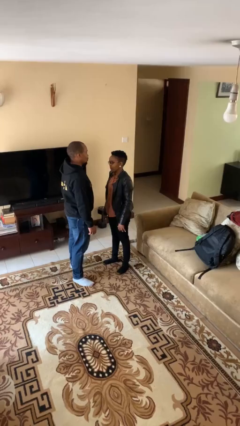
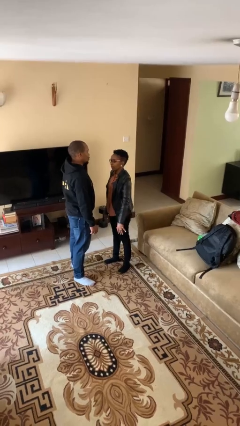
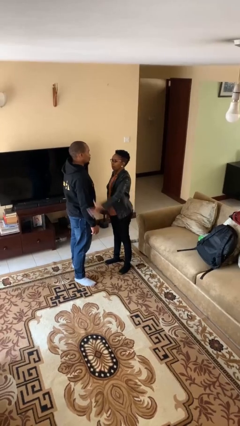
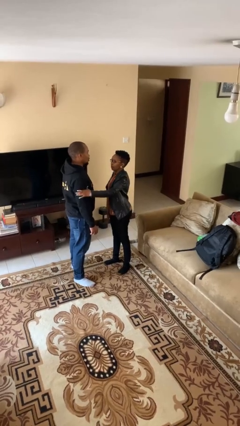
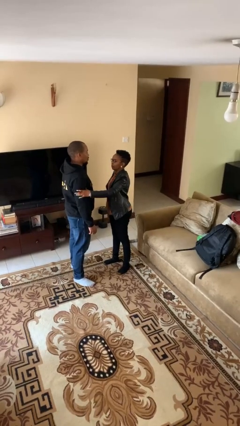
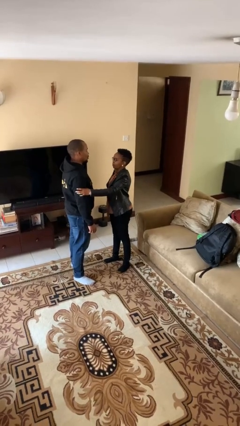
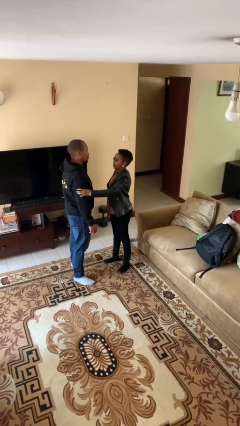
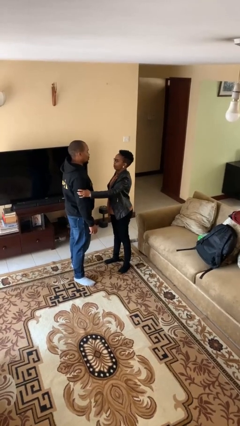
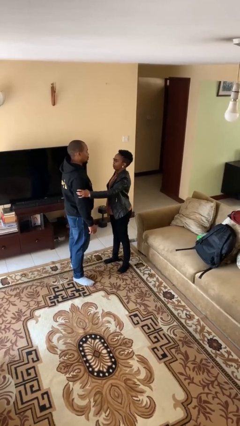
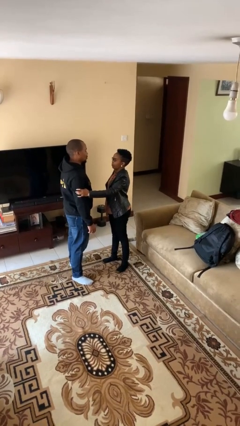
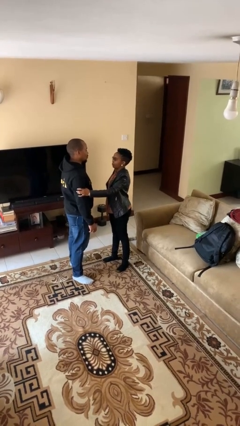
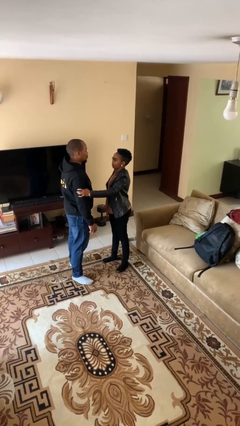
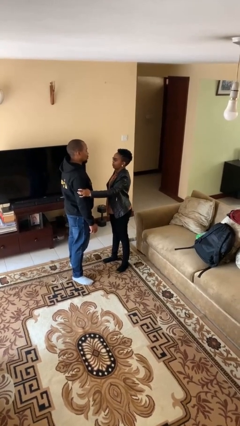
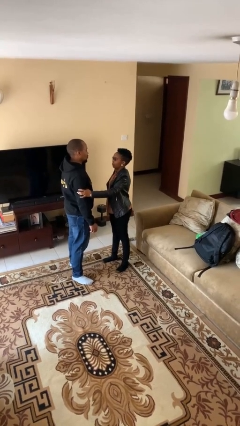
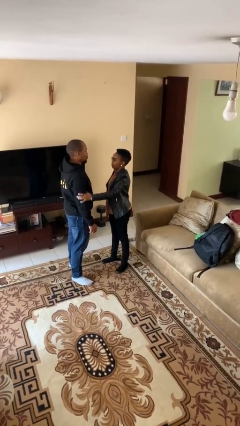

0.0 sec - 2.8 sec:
person grabs person by bicep

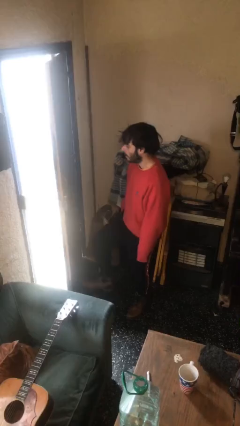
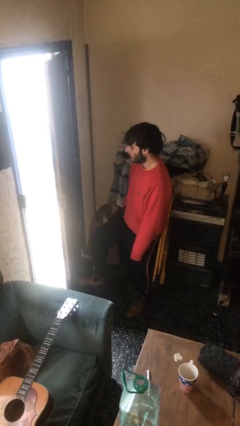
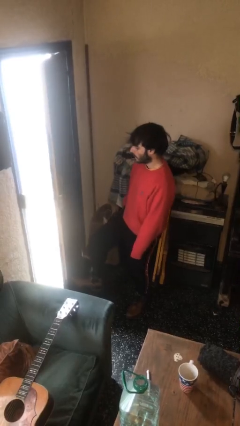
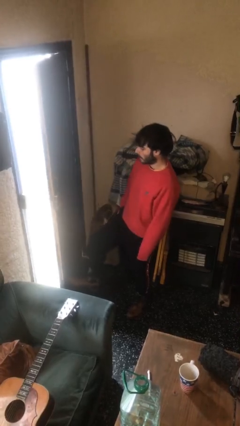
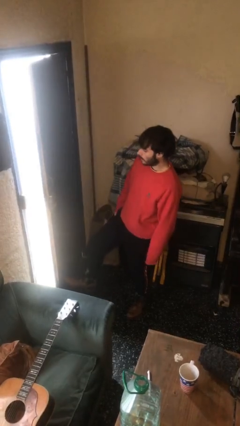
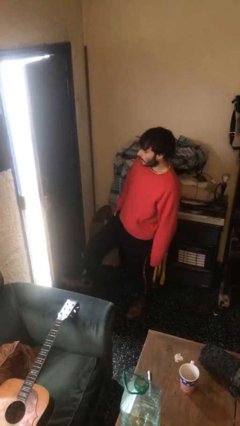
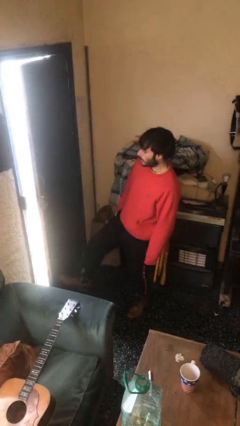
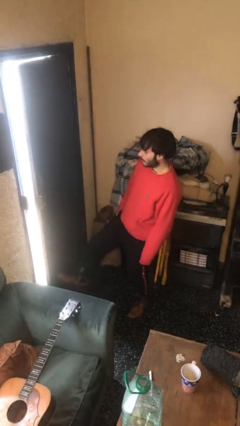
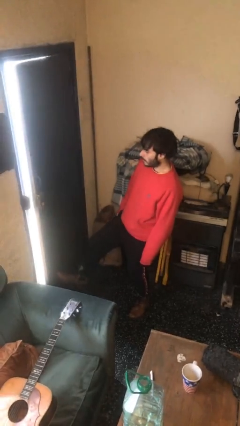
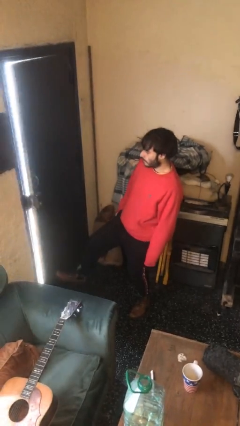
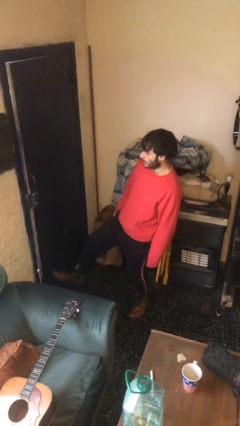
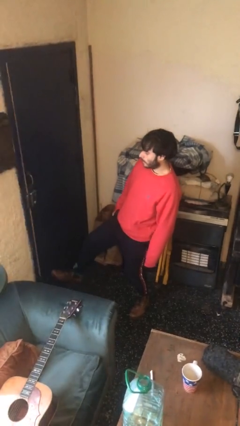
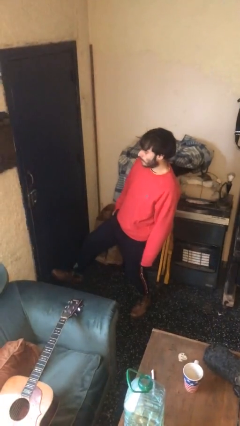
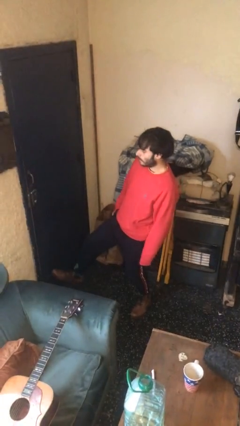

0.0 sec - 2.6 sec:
person closes door with foot

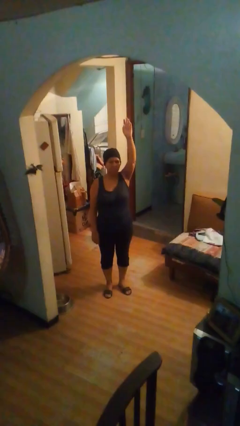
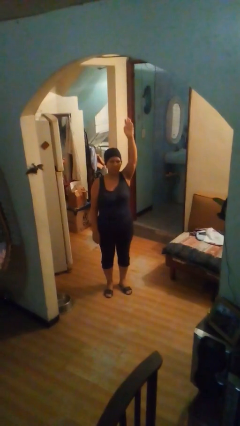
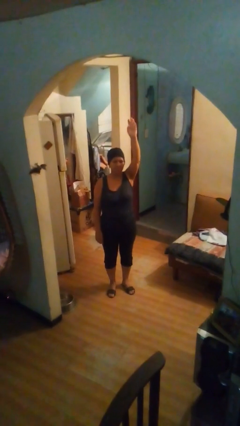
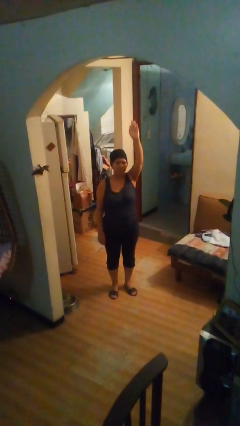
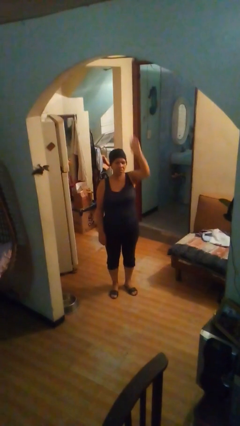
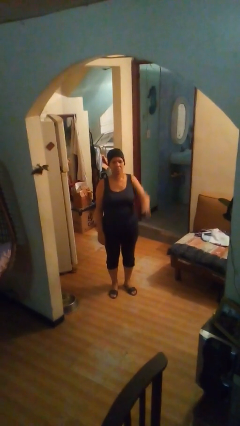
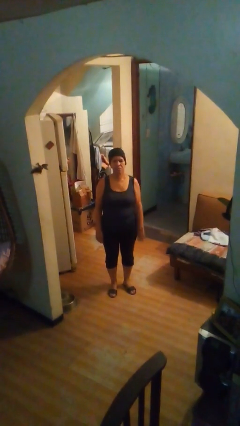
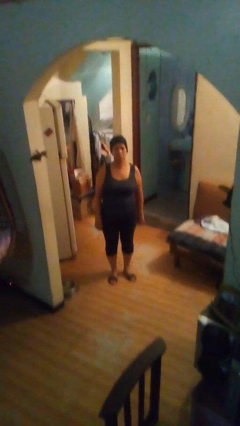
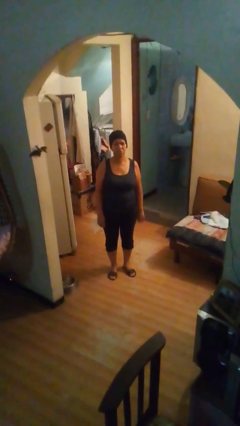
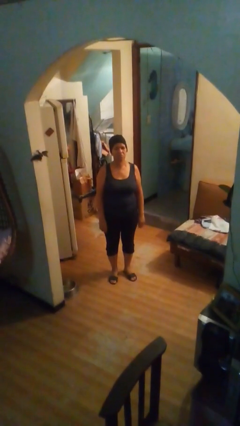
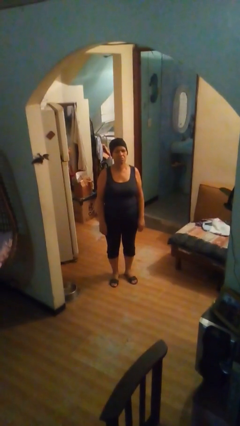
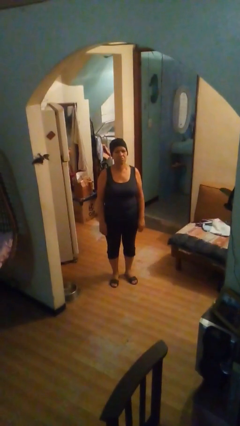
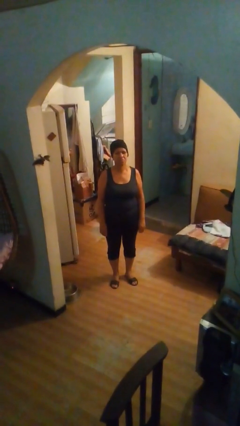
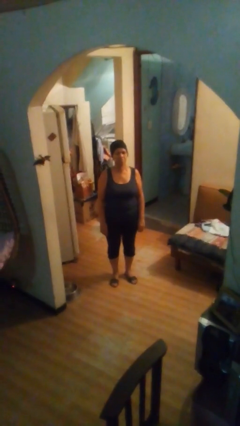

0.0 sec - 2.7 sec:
person gestures lower hand

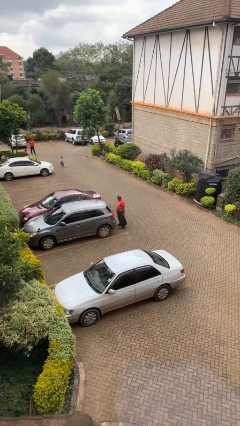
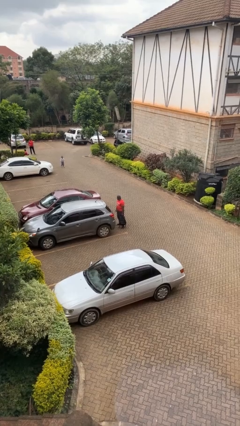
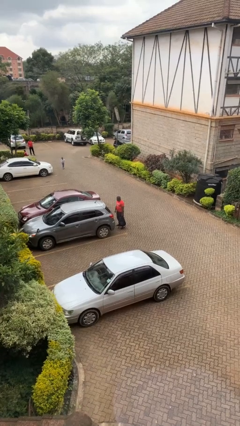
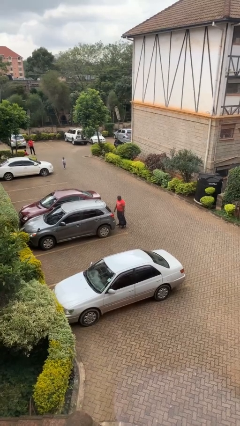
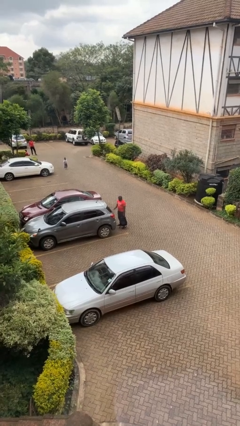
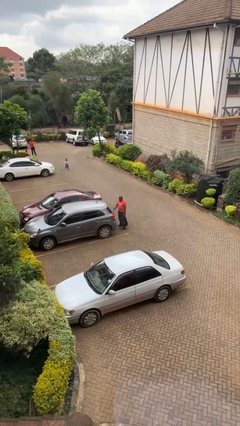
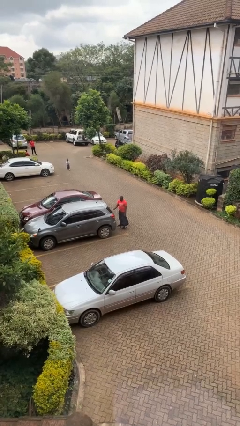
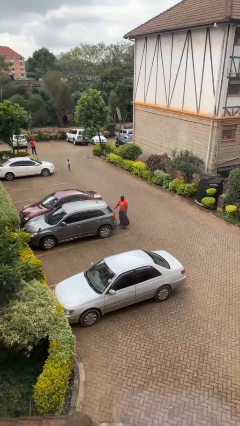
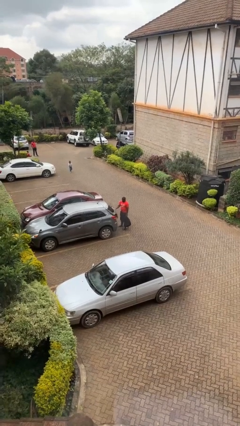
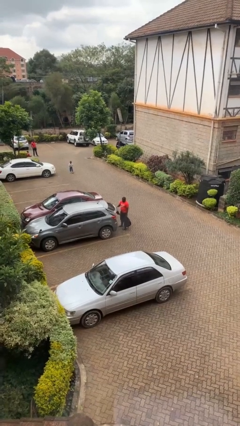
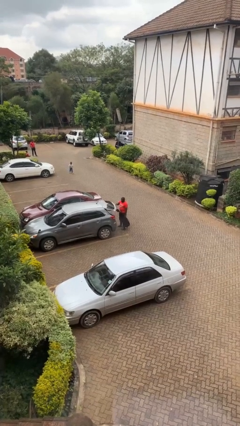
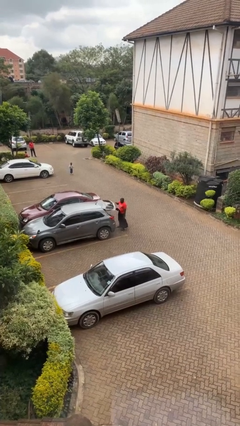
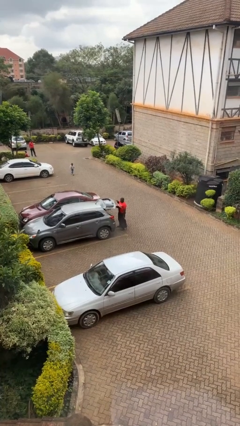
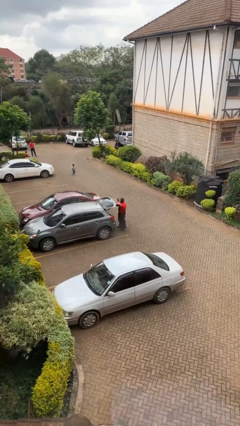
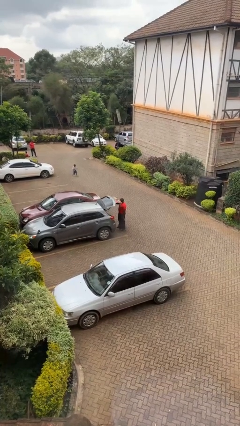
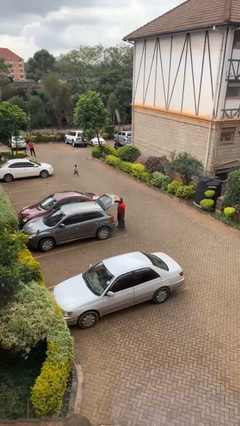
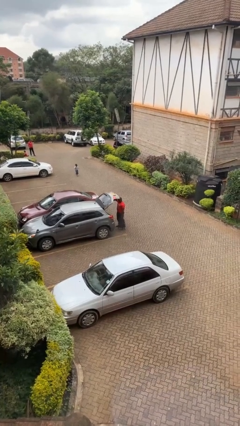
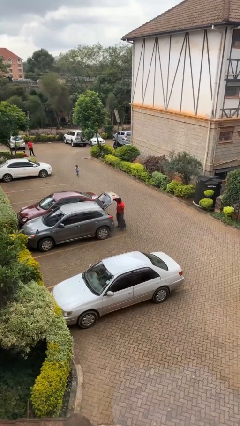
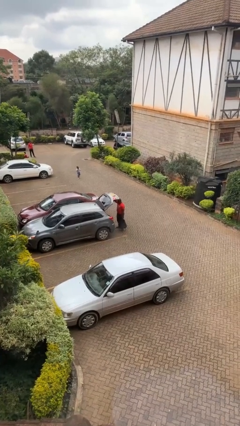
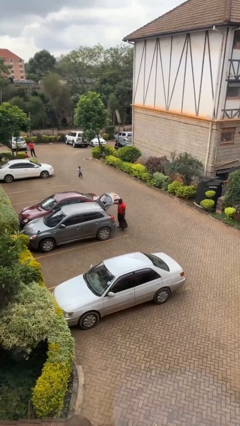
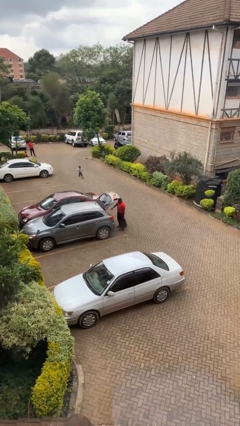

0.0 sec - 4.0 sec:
person opens car trunk

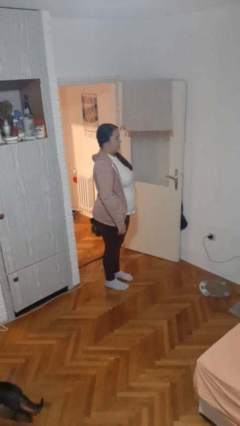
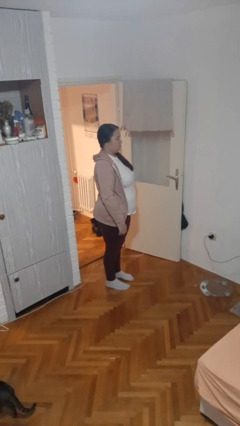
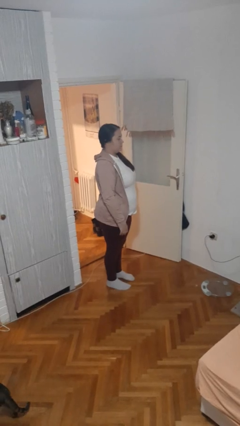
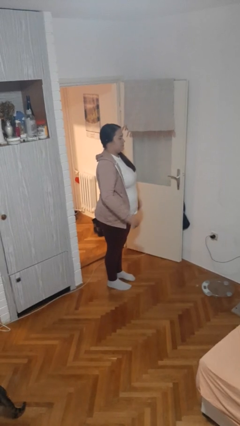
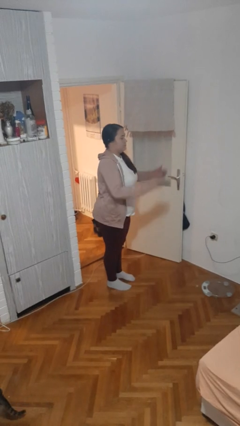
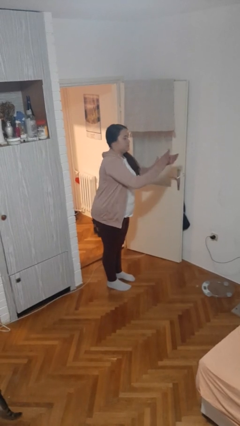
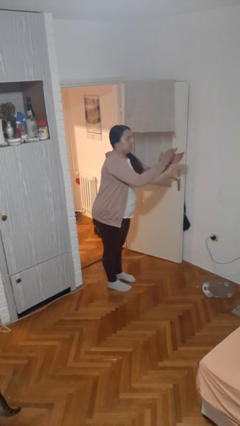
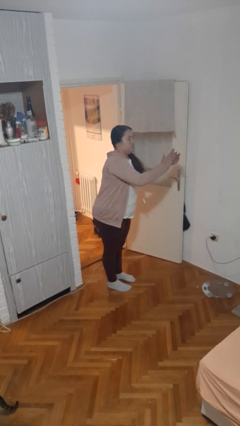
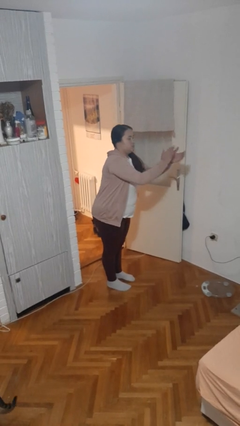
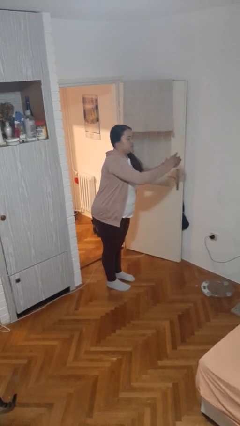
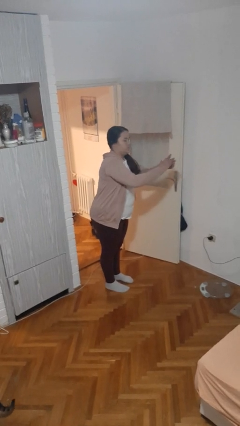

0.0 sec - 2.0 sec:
person claps hands

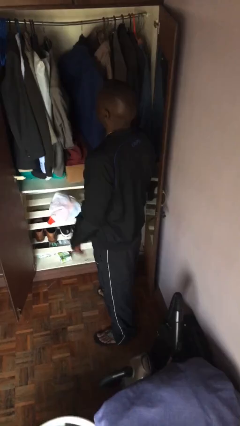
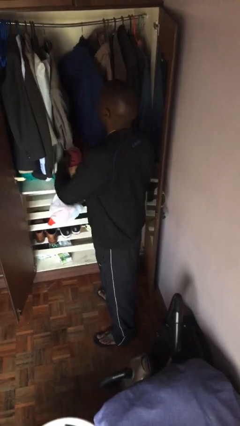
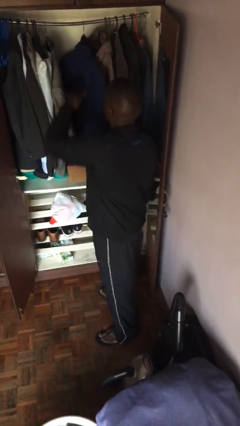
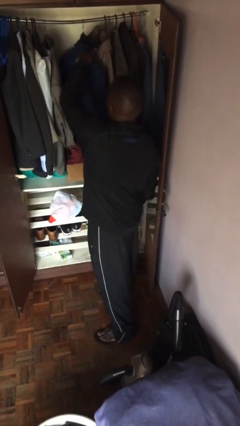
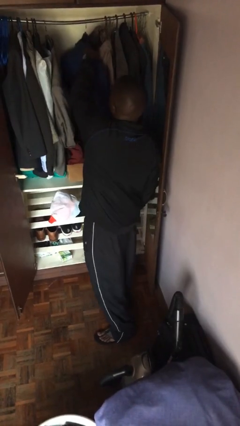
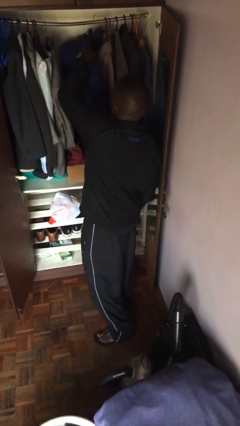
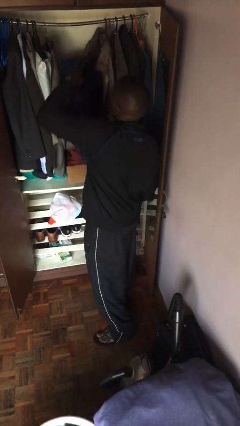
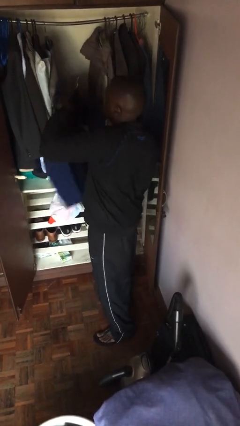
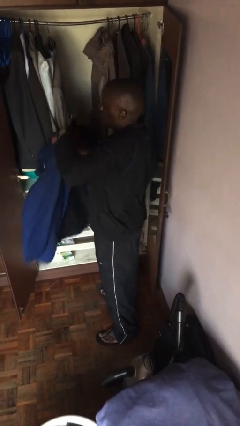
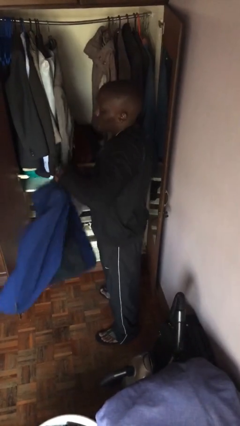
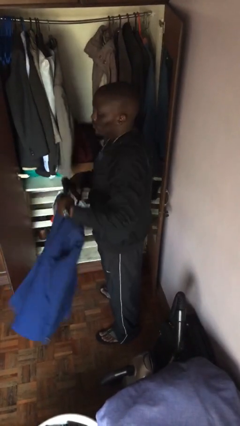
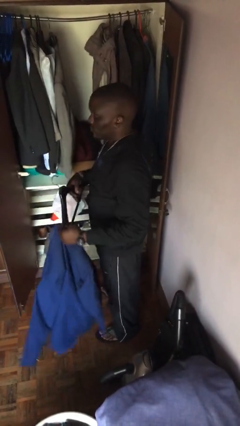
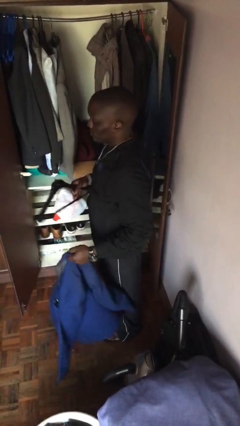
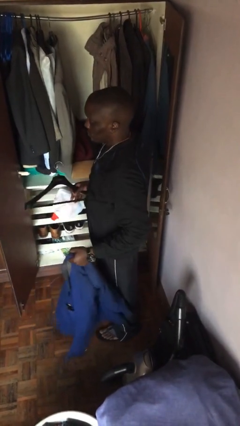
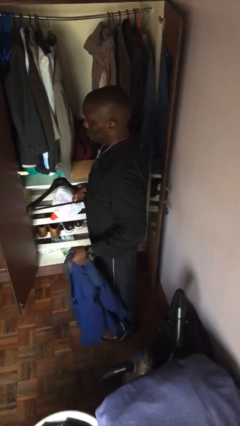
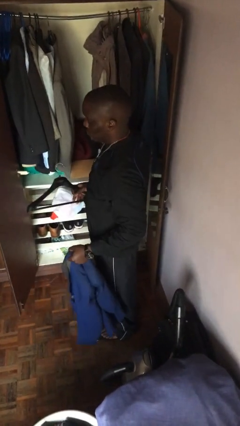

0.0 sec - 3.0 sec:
person takes clothes from closet

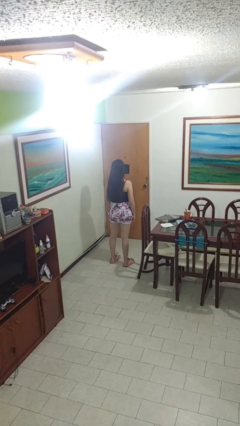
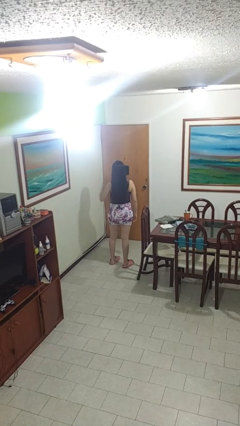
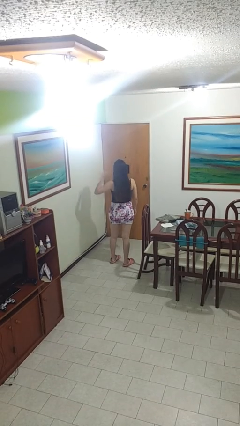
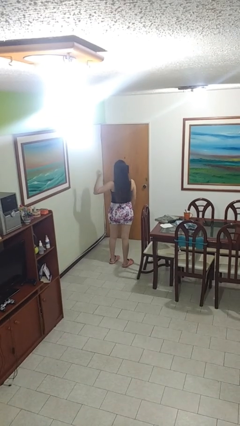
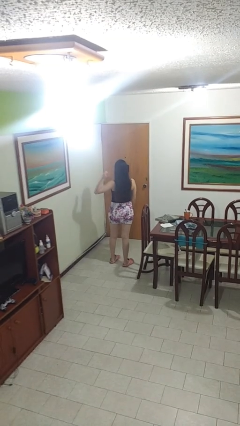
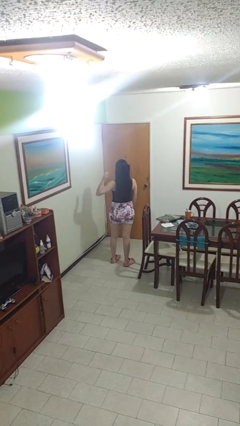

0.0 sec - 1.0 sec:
person gestures behind me
